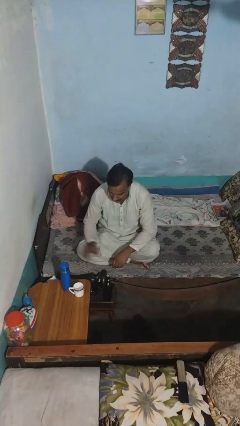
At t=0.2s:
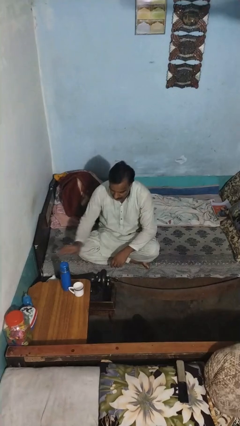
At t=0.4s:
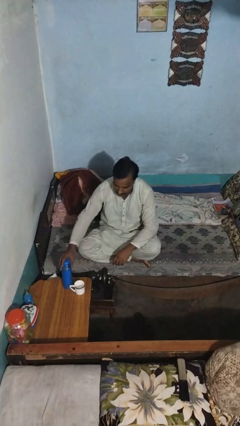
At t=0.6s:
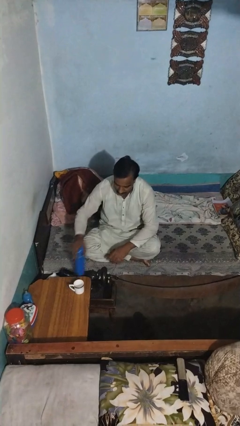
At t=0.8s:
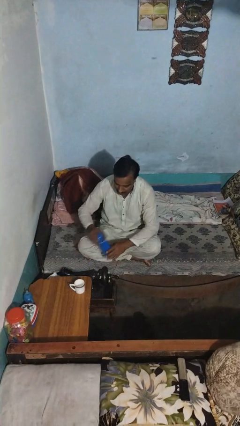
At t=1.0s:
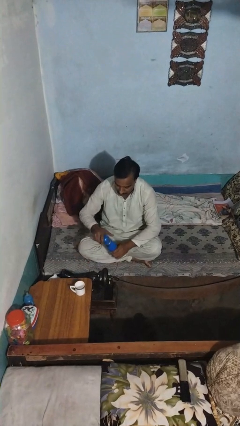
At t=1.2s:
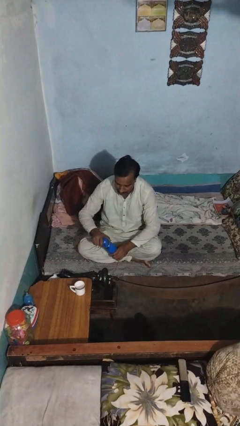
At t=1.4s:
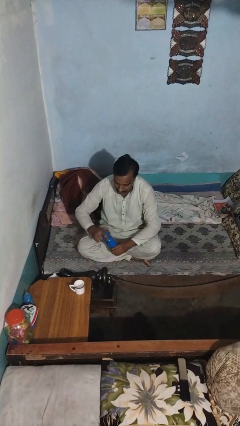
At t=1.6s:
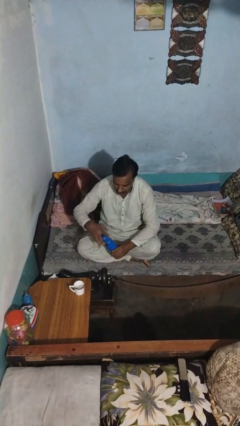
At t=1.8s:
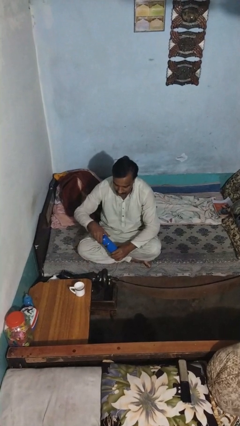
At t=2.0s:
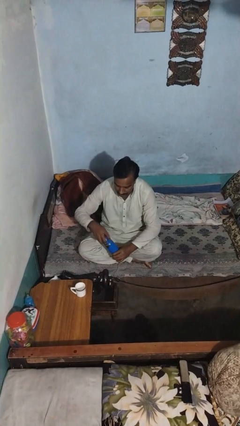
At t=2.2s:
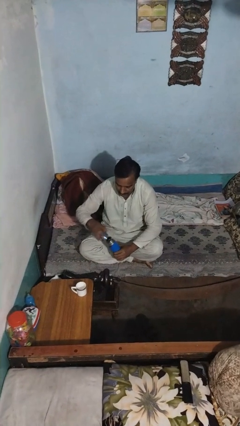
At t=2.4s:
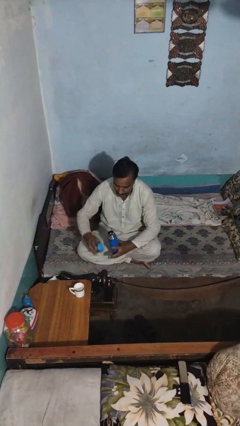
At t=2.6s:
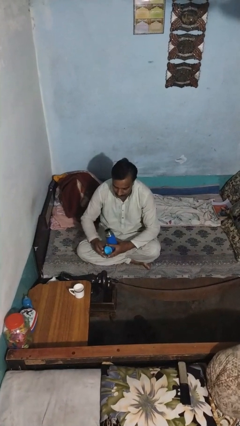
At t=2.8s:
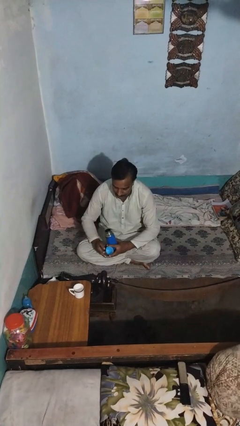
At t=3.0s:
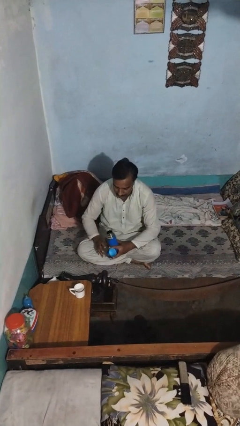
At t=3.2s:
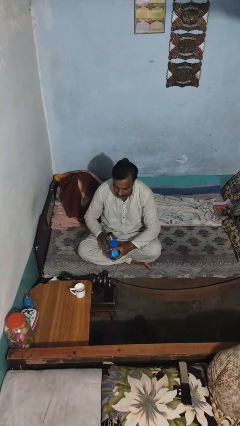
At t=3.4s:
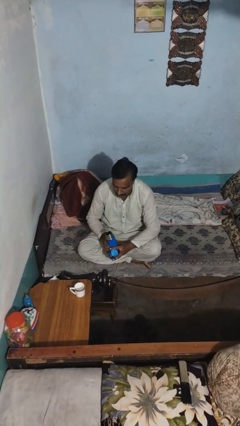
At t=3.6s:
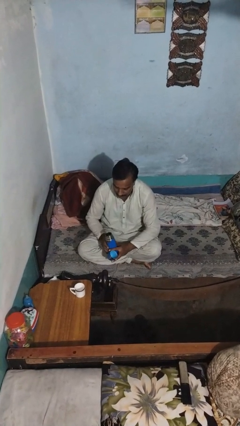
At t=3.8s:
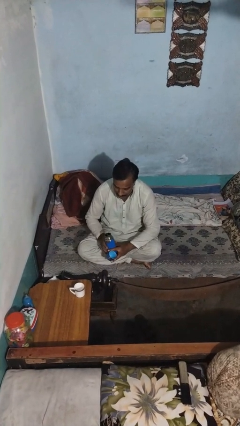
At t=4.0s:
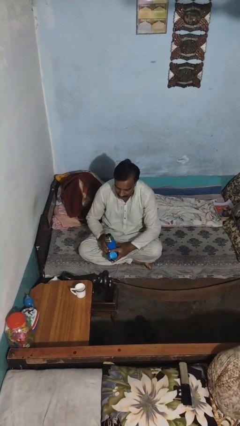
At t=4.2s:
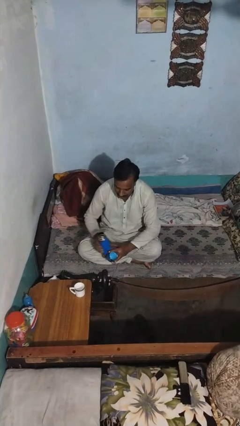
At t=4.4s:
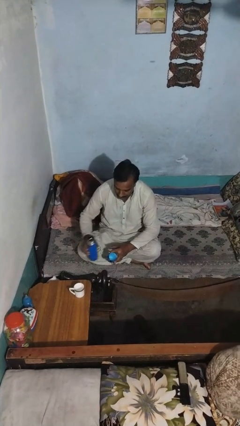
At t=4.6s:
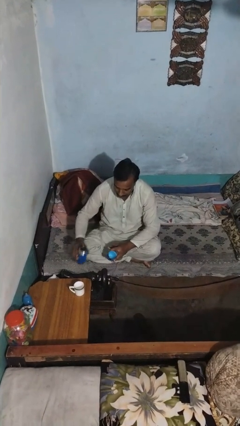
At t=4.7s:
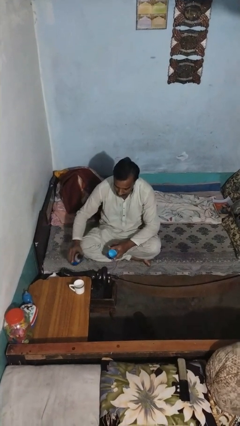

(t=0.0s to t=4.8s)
person unscrews lid from bottle

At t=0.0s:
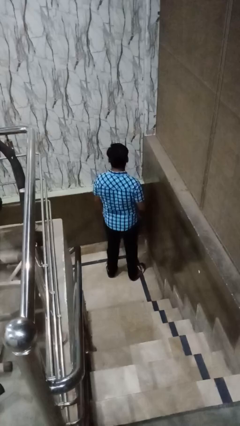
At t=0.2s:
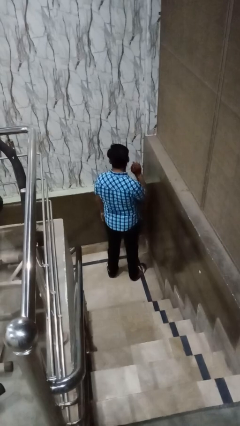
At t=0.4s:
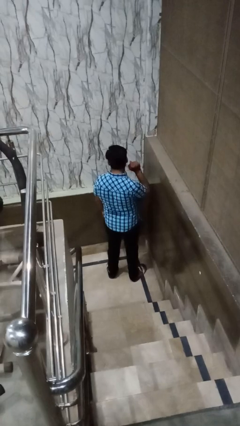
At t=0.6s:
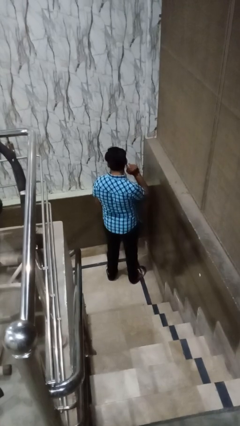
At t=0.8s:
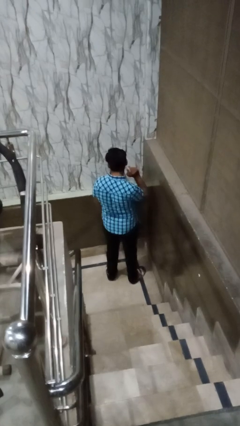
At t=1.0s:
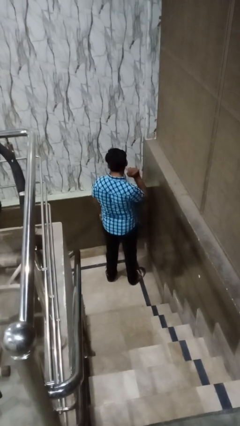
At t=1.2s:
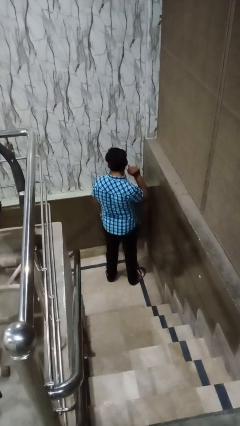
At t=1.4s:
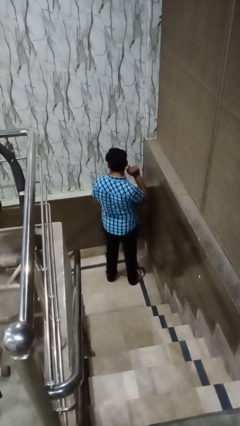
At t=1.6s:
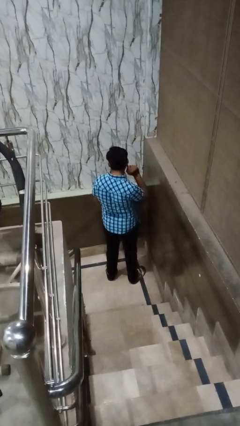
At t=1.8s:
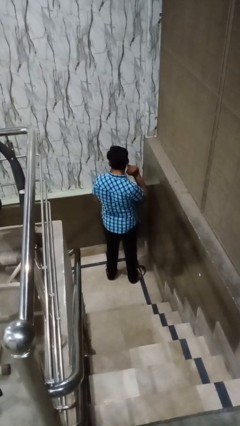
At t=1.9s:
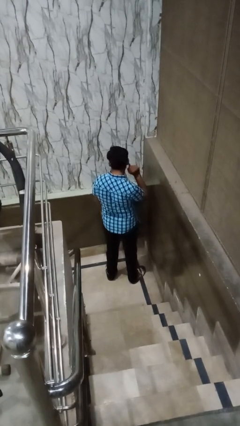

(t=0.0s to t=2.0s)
person touches earlobe

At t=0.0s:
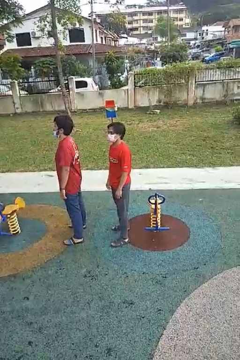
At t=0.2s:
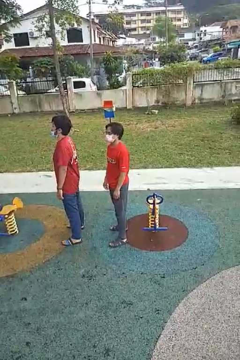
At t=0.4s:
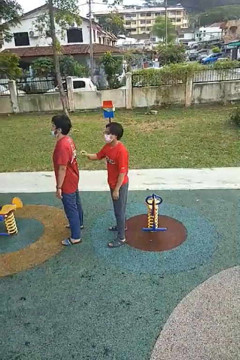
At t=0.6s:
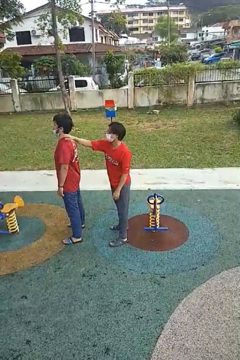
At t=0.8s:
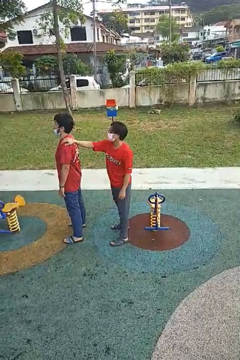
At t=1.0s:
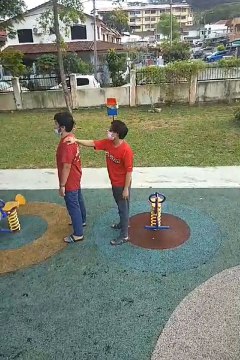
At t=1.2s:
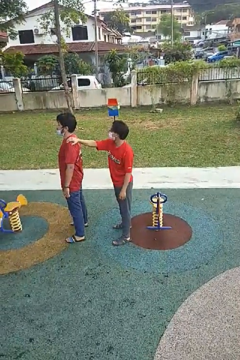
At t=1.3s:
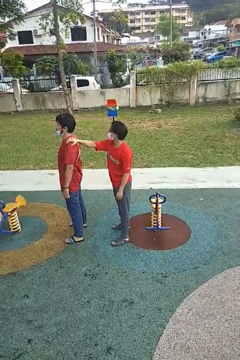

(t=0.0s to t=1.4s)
person grabs person by shoulder

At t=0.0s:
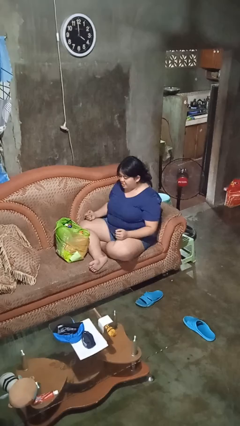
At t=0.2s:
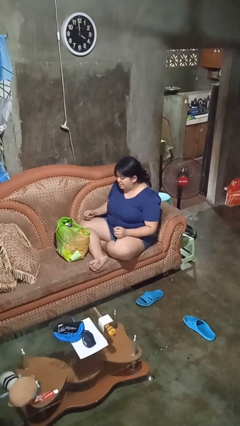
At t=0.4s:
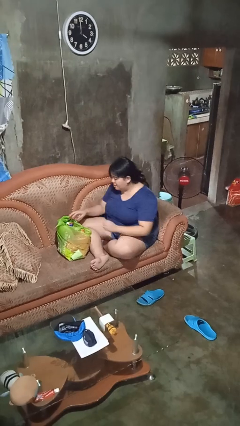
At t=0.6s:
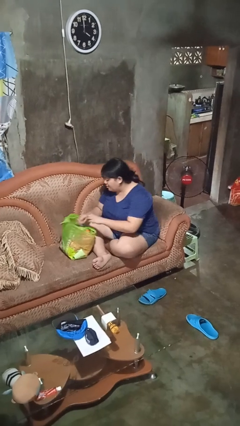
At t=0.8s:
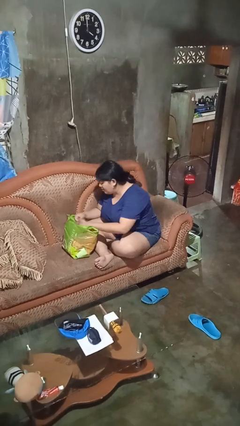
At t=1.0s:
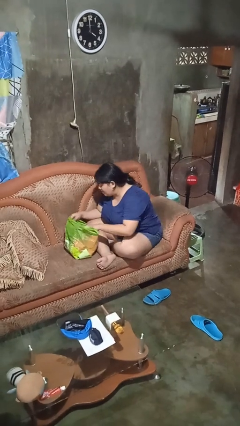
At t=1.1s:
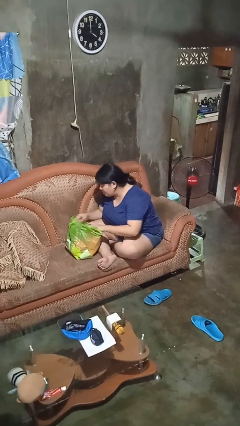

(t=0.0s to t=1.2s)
person searches in bag

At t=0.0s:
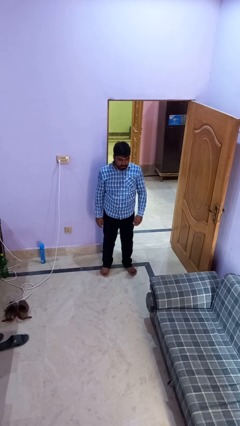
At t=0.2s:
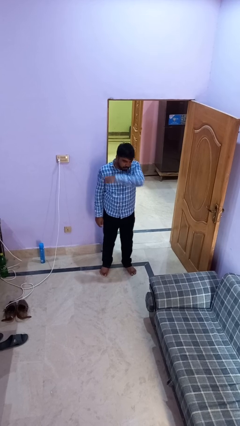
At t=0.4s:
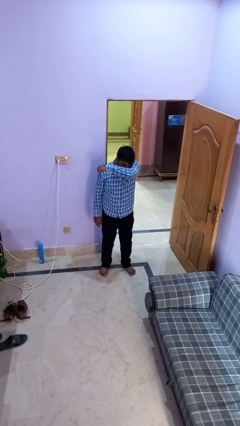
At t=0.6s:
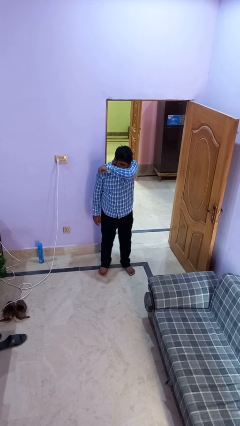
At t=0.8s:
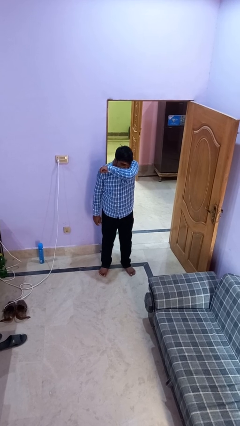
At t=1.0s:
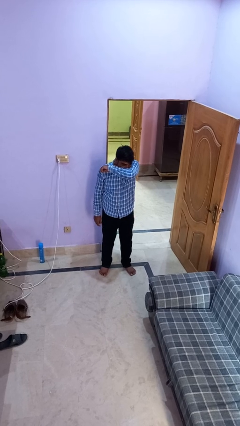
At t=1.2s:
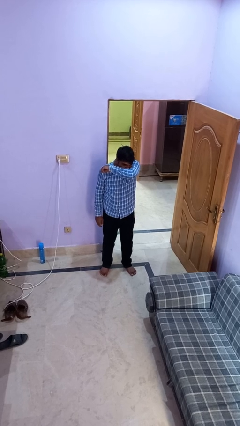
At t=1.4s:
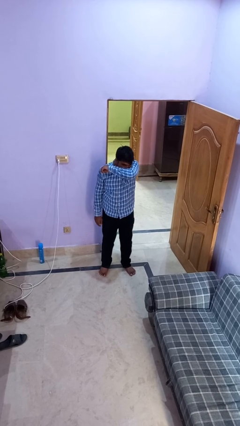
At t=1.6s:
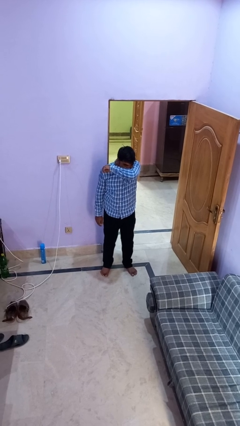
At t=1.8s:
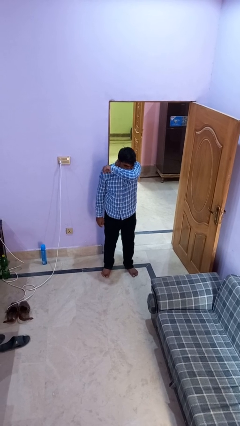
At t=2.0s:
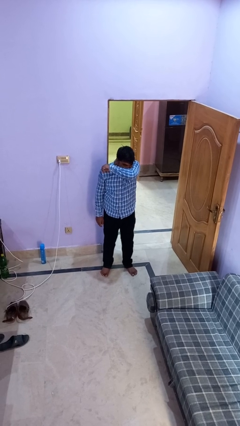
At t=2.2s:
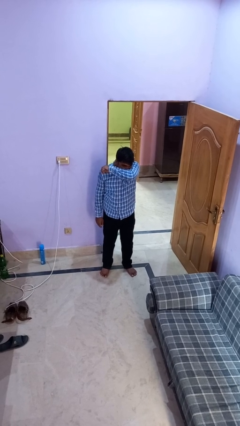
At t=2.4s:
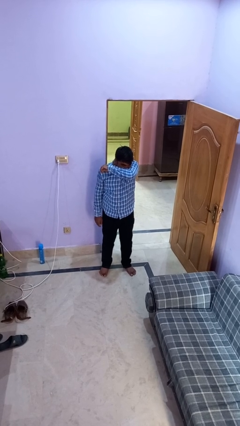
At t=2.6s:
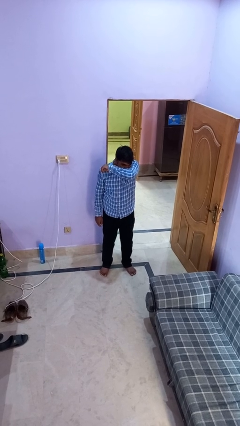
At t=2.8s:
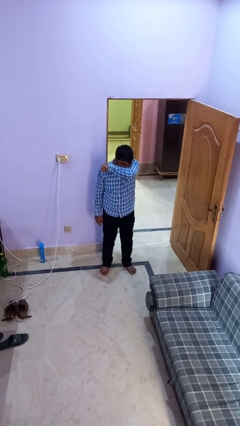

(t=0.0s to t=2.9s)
person sneezes into arm

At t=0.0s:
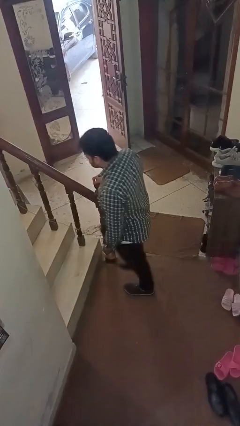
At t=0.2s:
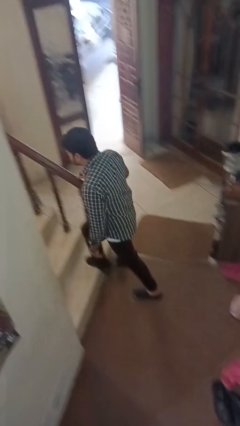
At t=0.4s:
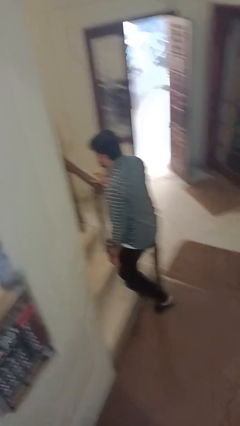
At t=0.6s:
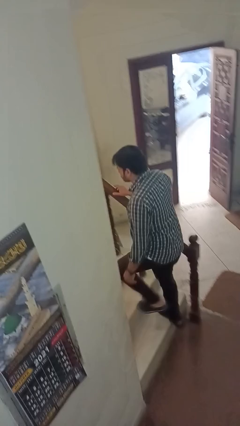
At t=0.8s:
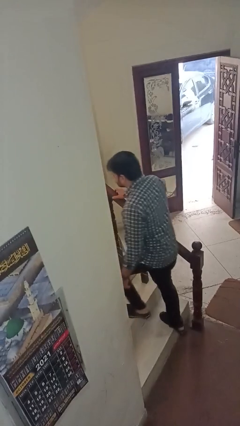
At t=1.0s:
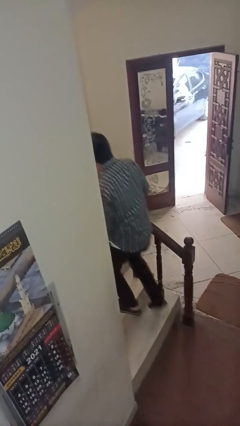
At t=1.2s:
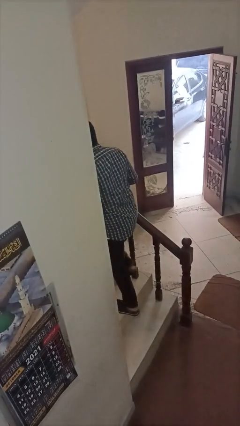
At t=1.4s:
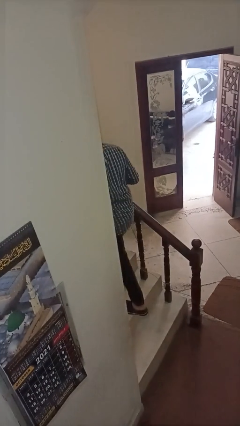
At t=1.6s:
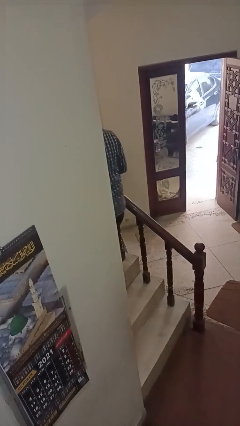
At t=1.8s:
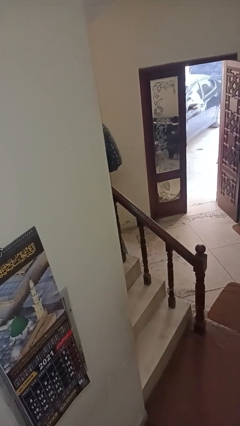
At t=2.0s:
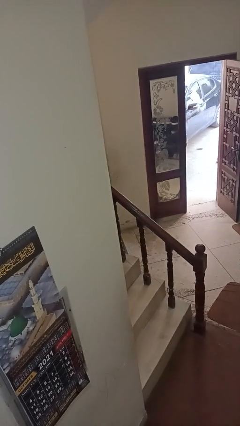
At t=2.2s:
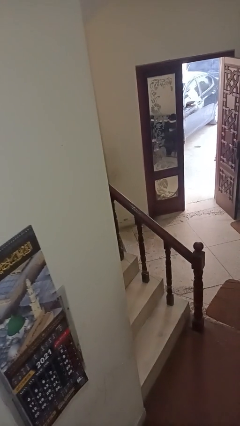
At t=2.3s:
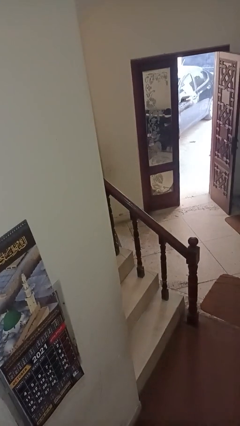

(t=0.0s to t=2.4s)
person climbs up stairs

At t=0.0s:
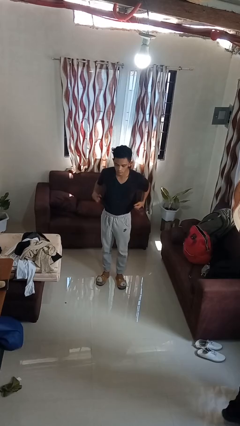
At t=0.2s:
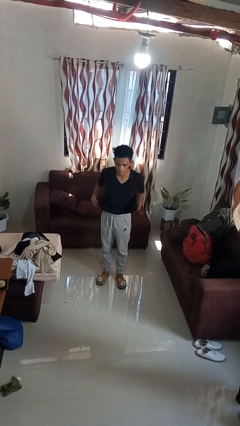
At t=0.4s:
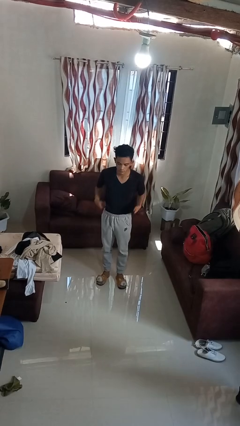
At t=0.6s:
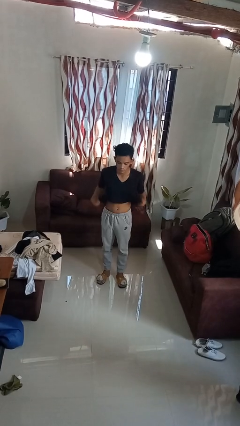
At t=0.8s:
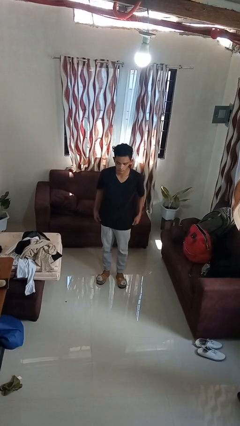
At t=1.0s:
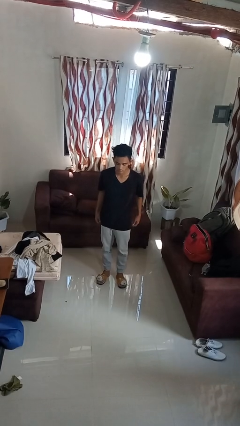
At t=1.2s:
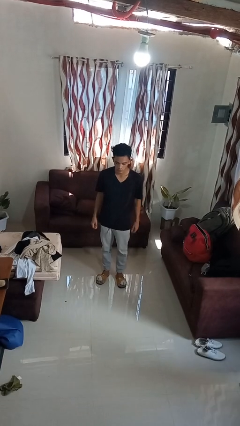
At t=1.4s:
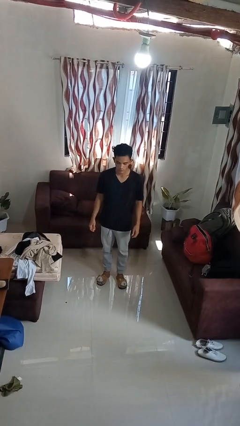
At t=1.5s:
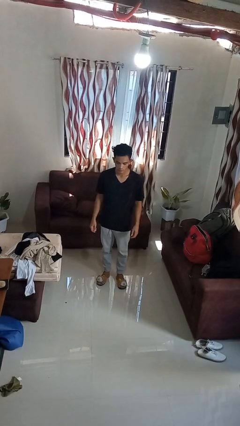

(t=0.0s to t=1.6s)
person untucks shirt

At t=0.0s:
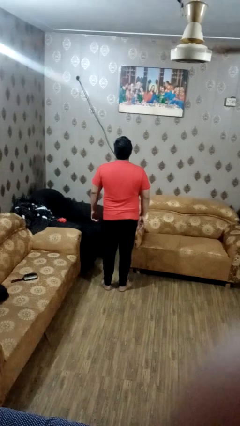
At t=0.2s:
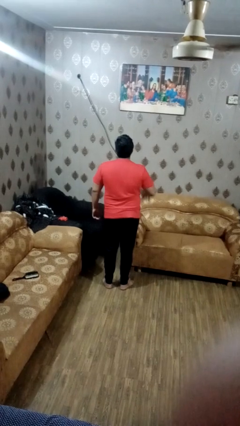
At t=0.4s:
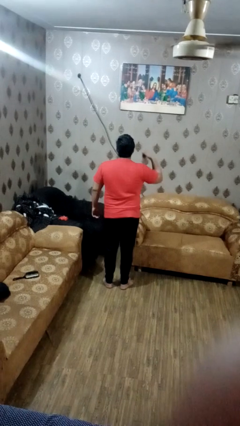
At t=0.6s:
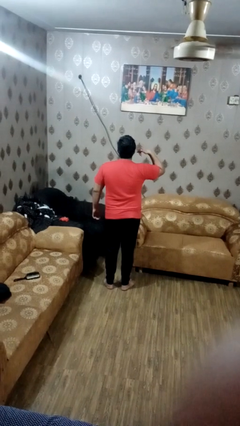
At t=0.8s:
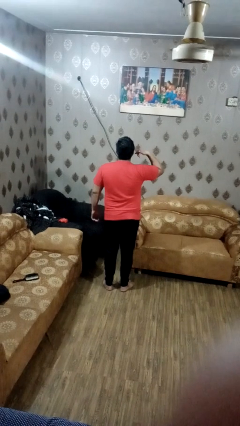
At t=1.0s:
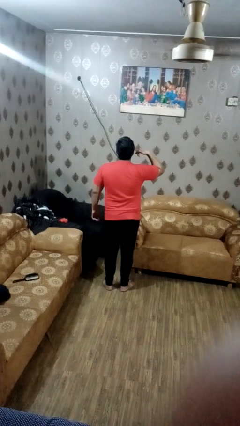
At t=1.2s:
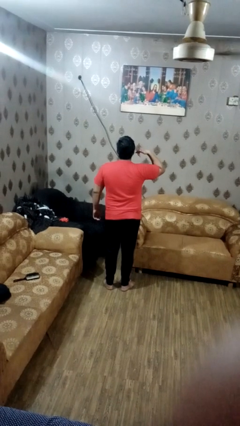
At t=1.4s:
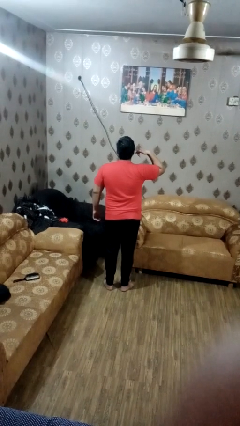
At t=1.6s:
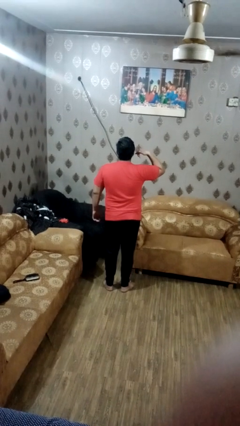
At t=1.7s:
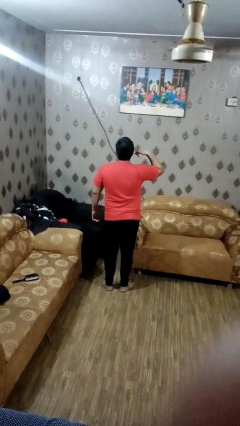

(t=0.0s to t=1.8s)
person gestures call me
